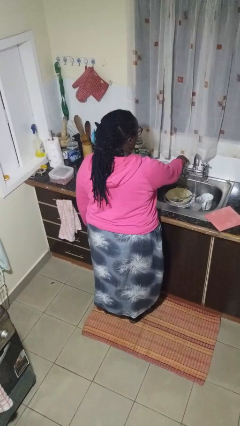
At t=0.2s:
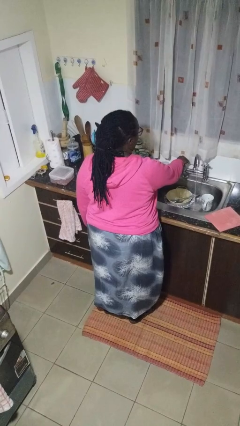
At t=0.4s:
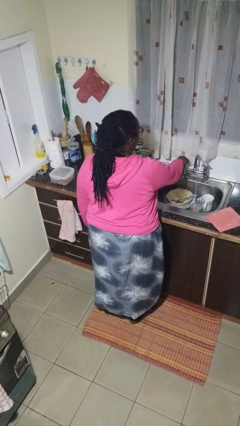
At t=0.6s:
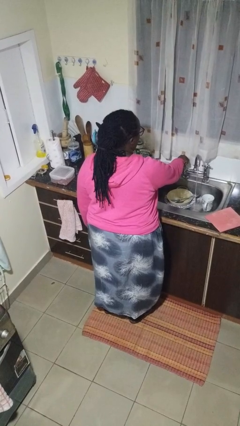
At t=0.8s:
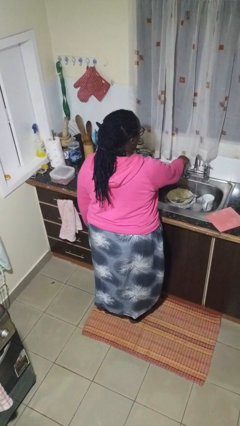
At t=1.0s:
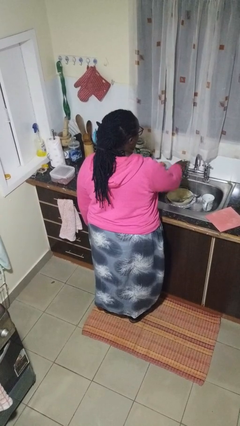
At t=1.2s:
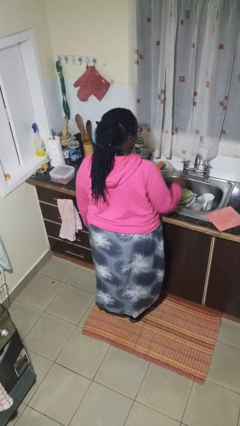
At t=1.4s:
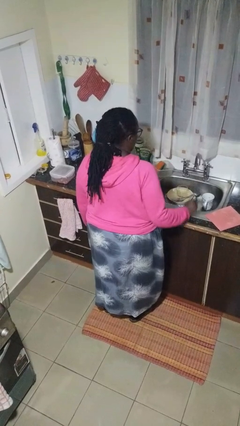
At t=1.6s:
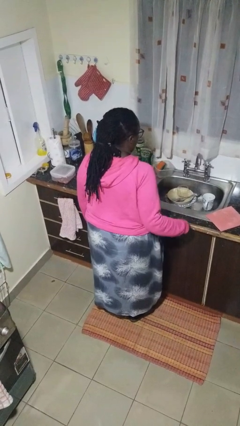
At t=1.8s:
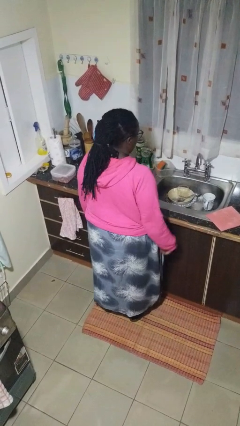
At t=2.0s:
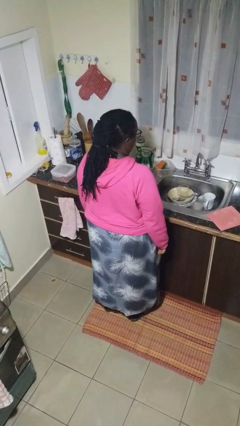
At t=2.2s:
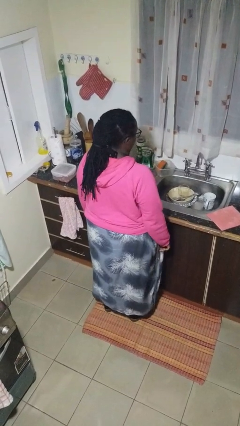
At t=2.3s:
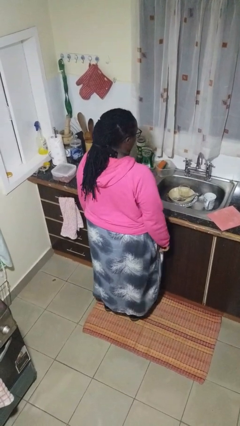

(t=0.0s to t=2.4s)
person turns off faucet

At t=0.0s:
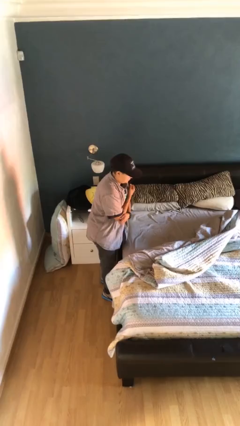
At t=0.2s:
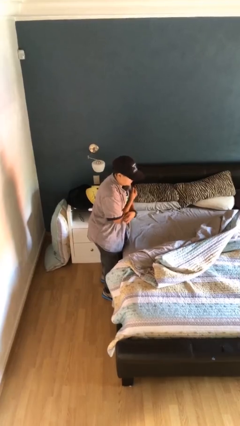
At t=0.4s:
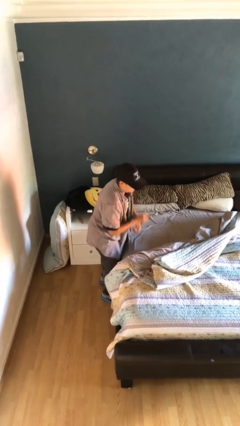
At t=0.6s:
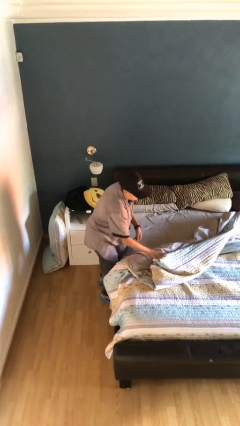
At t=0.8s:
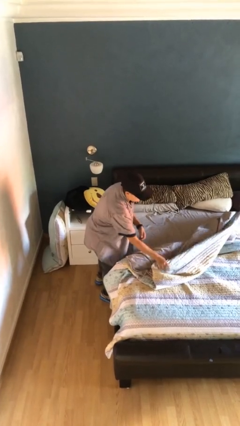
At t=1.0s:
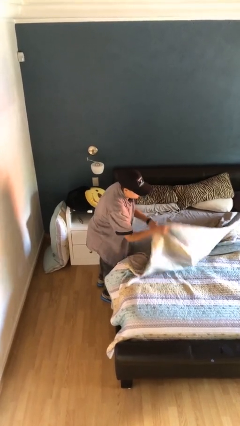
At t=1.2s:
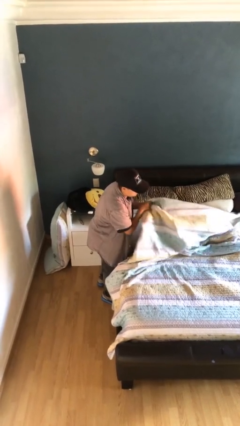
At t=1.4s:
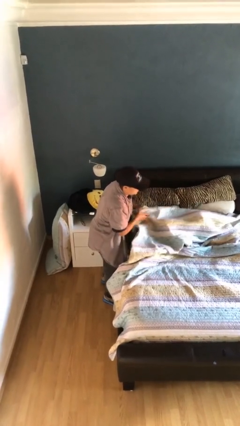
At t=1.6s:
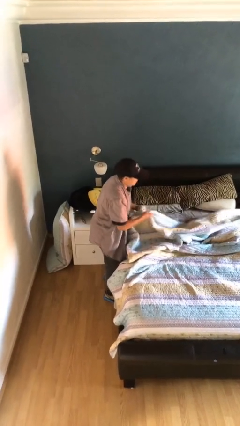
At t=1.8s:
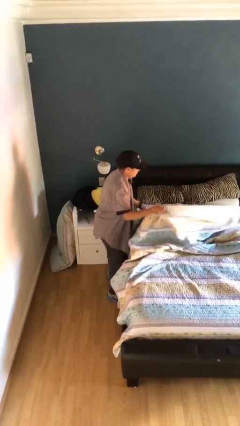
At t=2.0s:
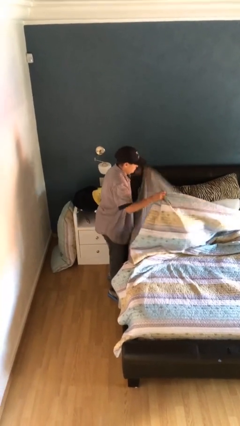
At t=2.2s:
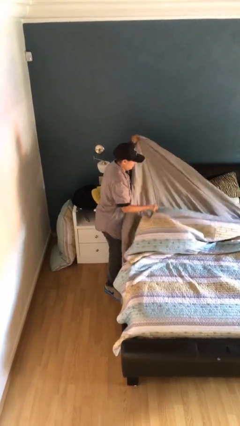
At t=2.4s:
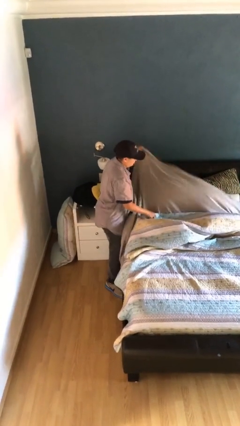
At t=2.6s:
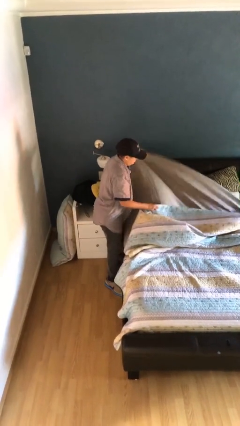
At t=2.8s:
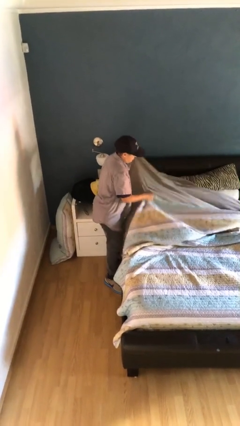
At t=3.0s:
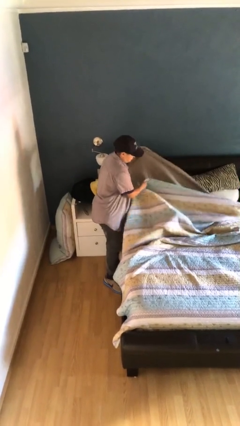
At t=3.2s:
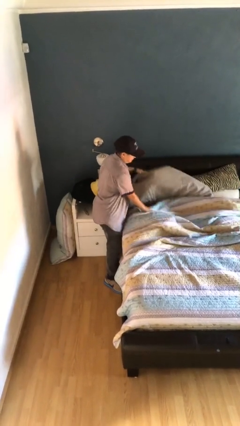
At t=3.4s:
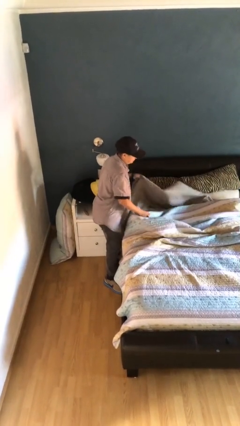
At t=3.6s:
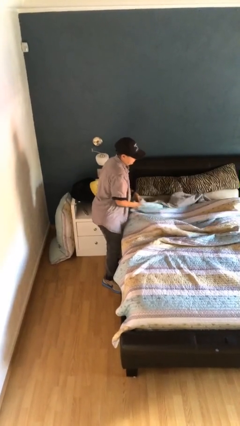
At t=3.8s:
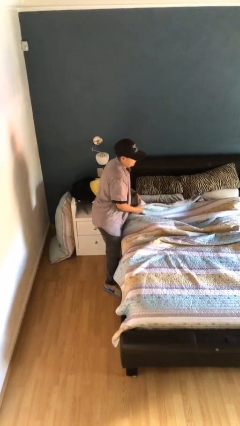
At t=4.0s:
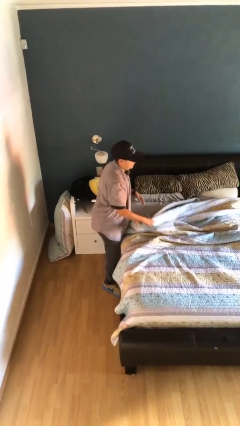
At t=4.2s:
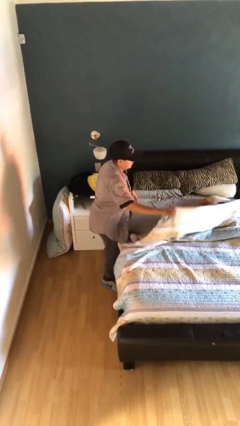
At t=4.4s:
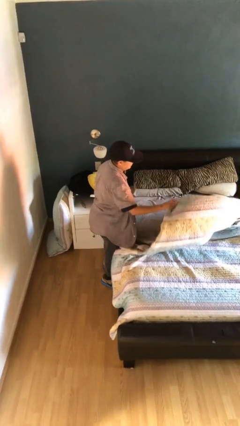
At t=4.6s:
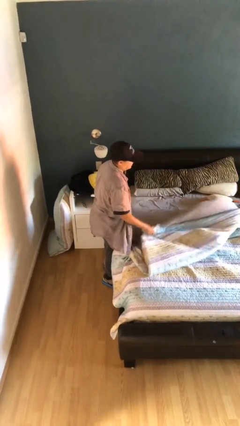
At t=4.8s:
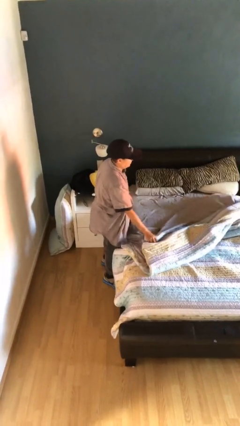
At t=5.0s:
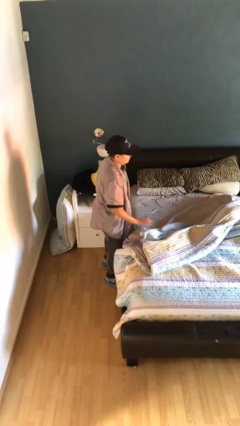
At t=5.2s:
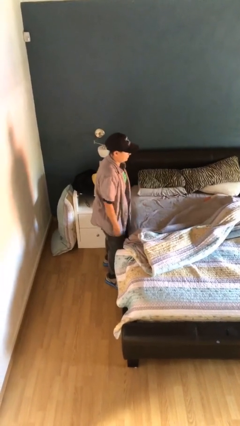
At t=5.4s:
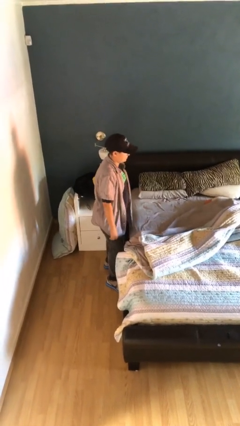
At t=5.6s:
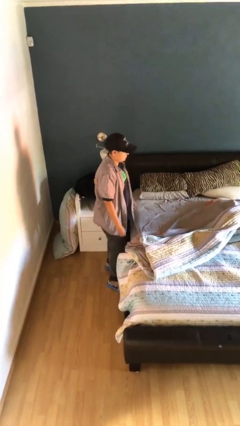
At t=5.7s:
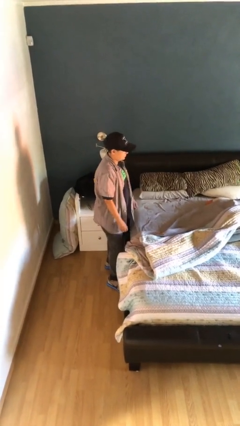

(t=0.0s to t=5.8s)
person makes bed

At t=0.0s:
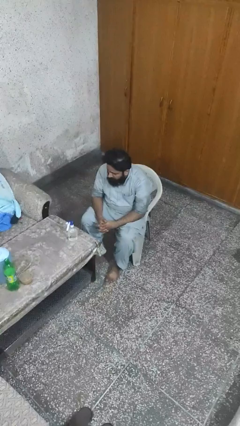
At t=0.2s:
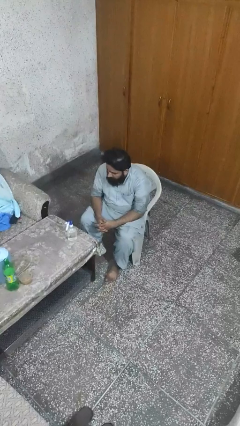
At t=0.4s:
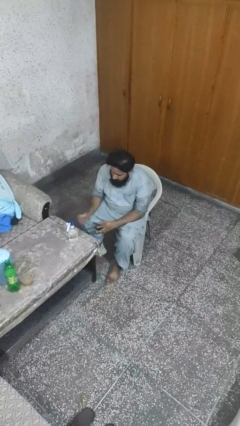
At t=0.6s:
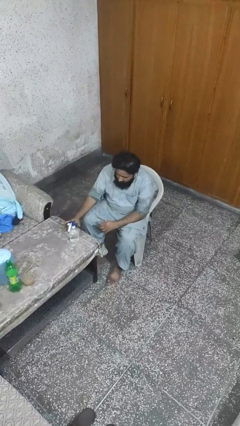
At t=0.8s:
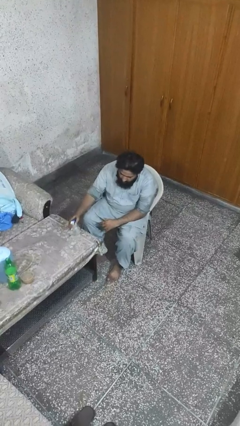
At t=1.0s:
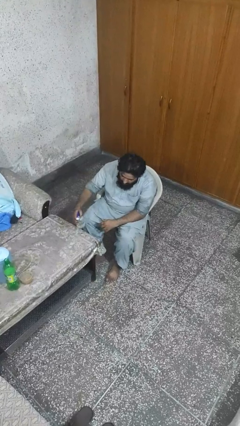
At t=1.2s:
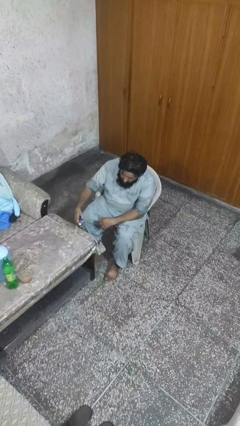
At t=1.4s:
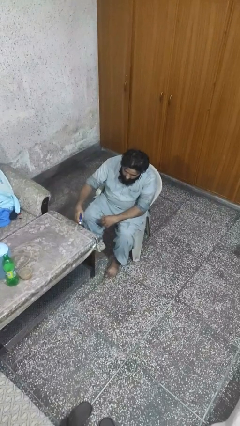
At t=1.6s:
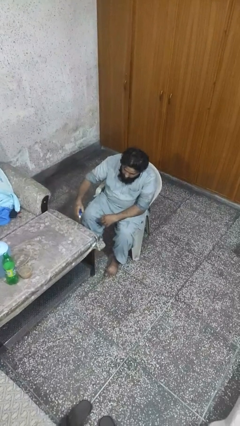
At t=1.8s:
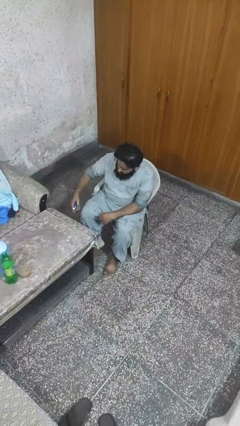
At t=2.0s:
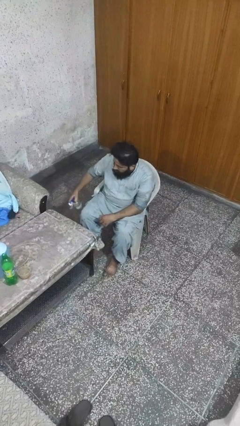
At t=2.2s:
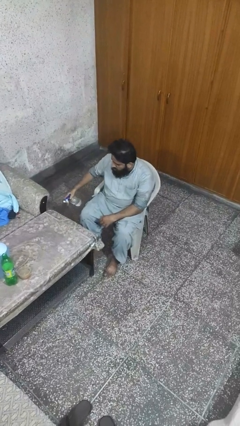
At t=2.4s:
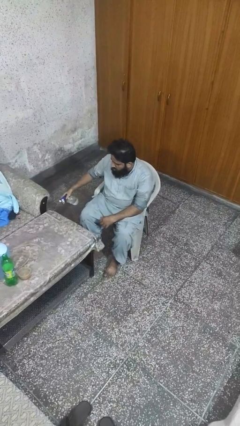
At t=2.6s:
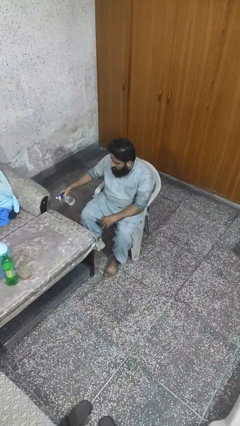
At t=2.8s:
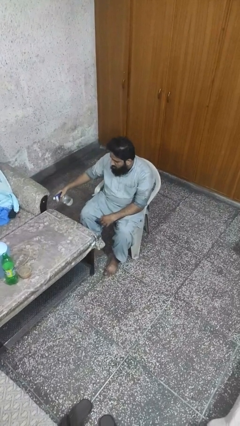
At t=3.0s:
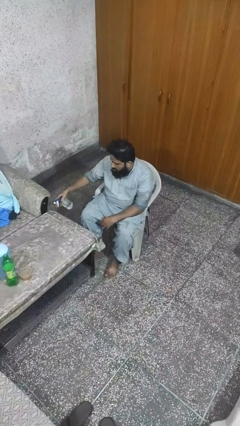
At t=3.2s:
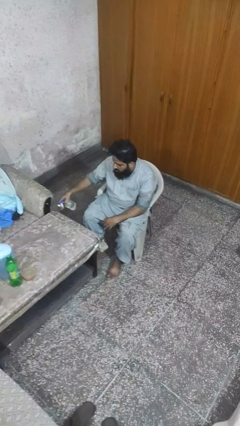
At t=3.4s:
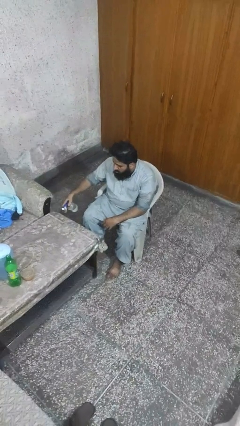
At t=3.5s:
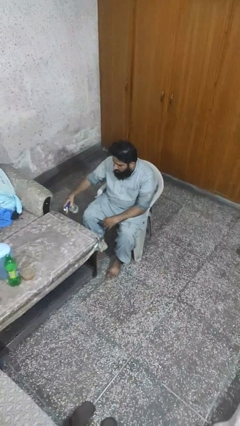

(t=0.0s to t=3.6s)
person sprays from bottle

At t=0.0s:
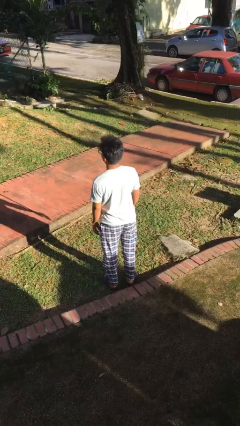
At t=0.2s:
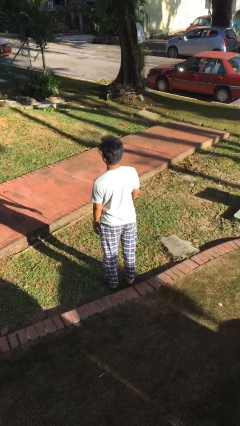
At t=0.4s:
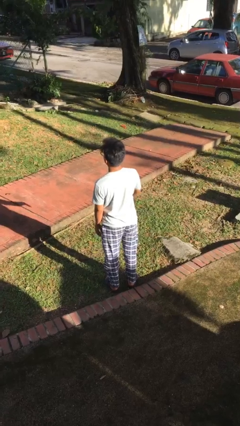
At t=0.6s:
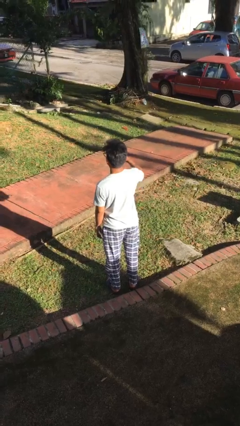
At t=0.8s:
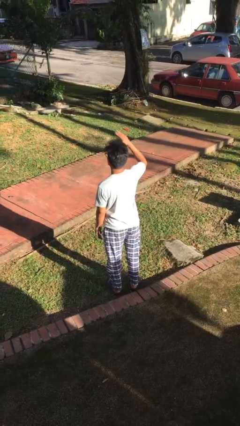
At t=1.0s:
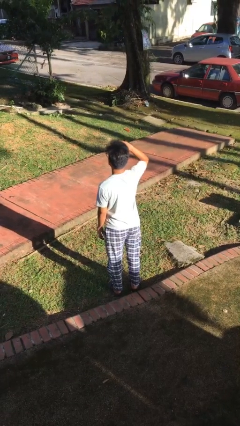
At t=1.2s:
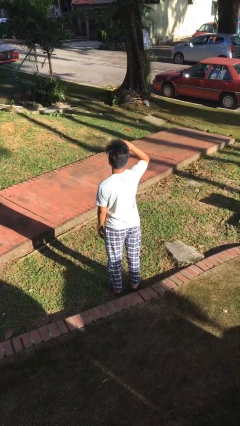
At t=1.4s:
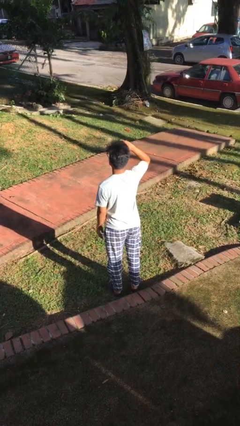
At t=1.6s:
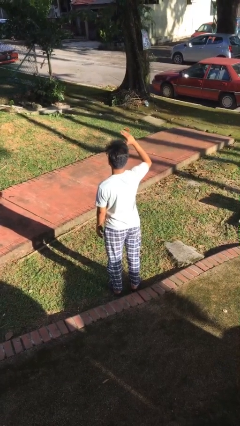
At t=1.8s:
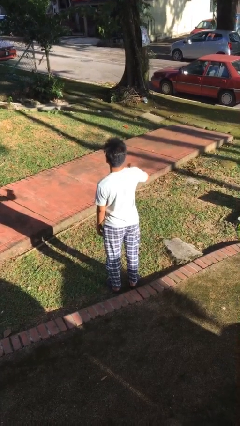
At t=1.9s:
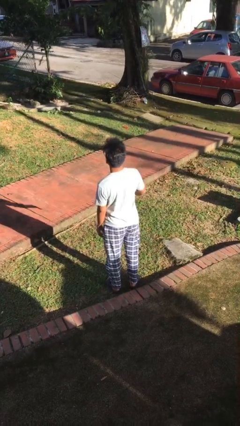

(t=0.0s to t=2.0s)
person salutes

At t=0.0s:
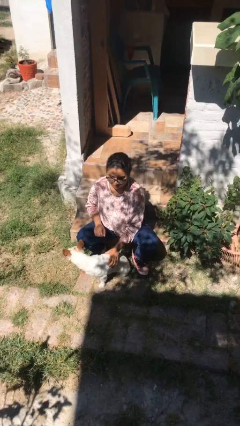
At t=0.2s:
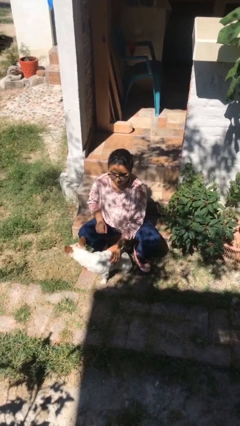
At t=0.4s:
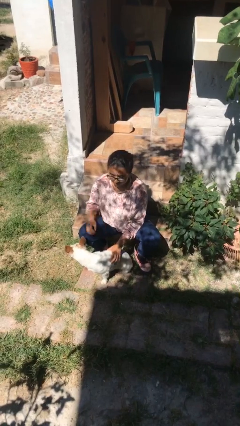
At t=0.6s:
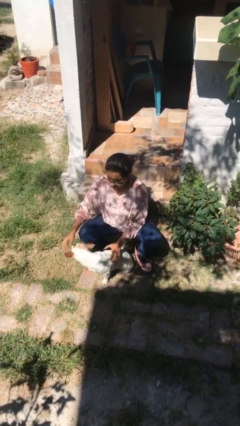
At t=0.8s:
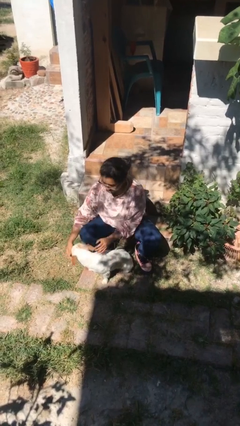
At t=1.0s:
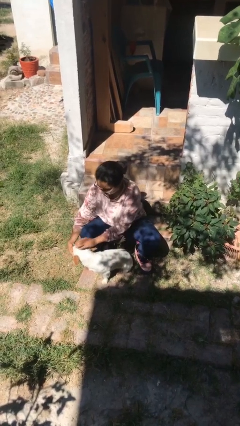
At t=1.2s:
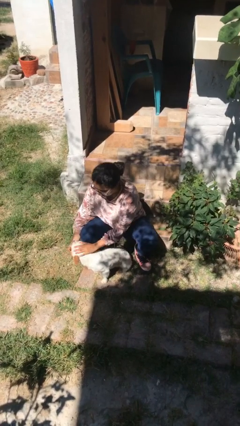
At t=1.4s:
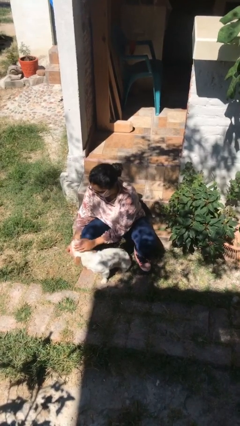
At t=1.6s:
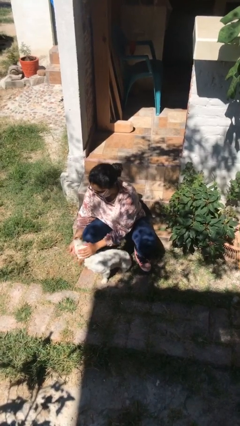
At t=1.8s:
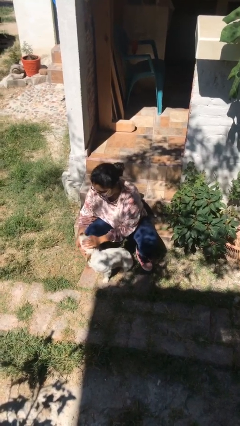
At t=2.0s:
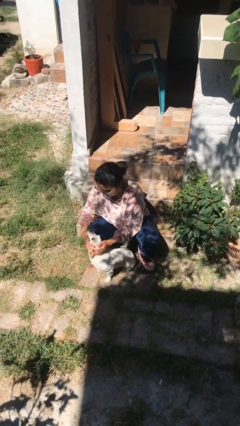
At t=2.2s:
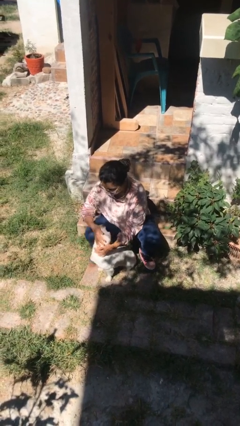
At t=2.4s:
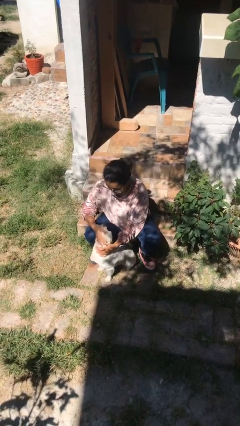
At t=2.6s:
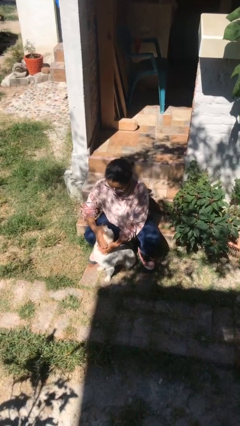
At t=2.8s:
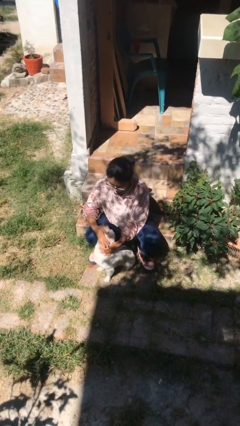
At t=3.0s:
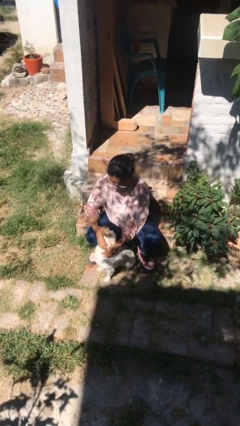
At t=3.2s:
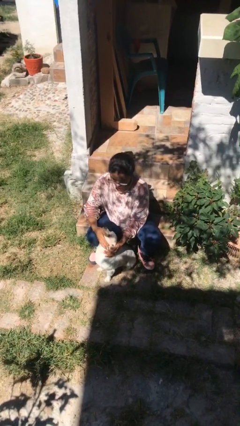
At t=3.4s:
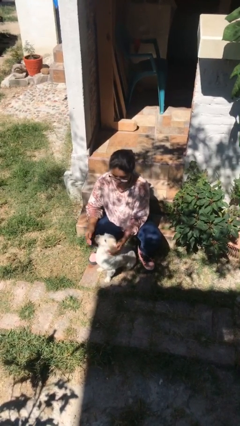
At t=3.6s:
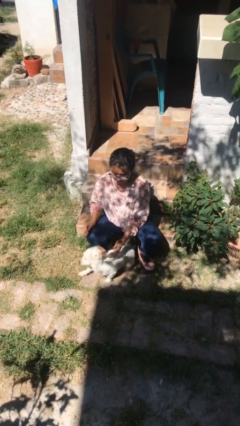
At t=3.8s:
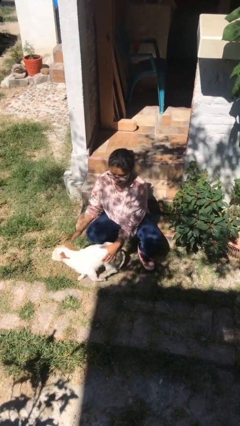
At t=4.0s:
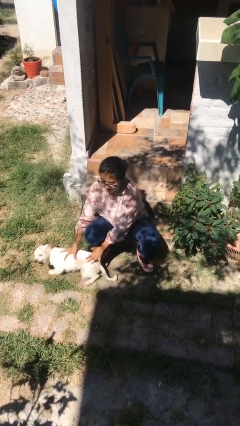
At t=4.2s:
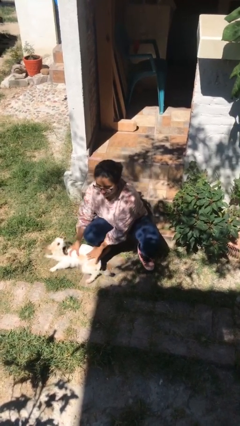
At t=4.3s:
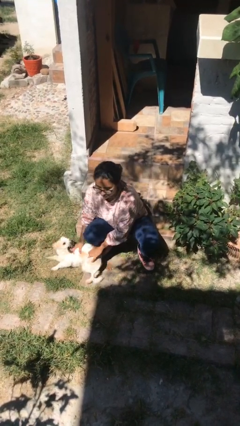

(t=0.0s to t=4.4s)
person pets dog
